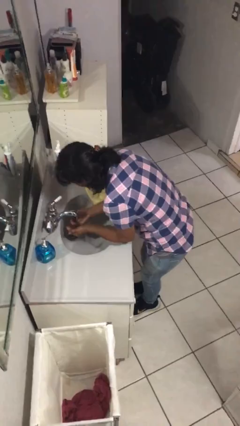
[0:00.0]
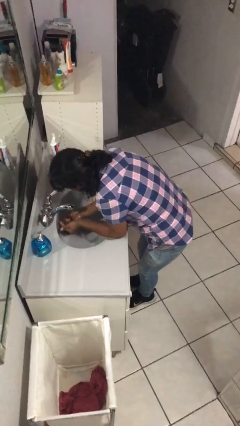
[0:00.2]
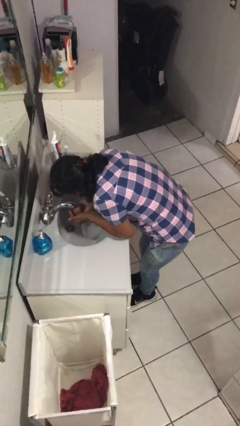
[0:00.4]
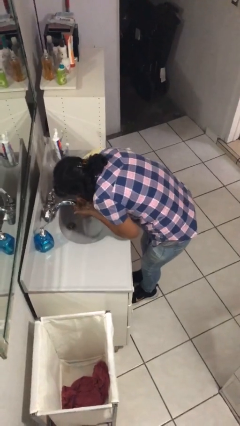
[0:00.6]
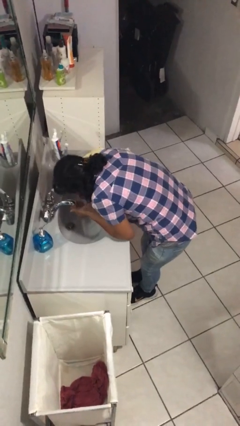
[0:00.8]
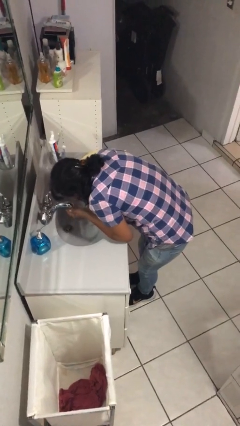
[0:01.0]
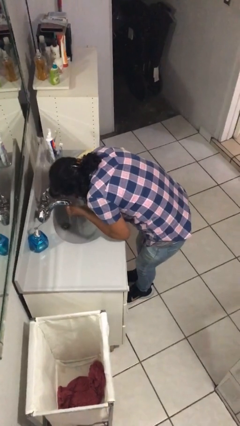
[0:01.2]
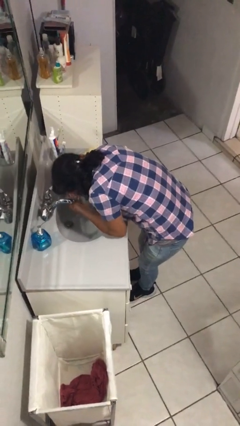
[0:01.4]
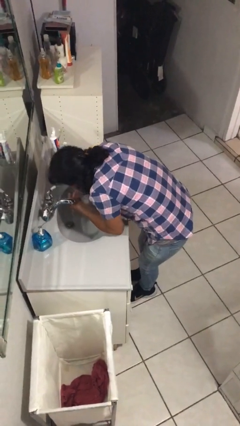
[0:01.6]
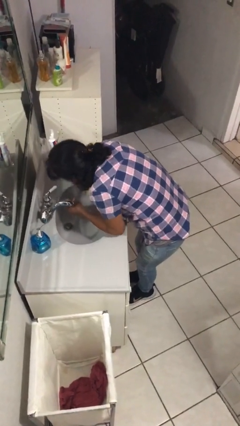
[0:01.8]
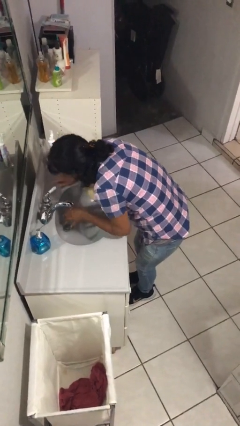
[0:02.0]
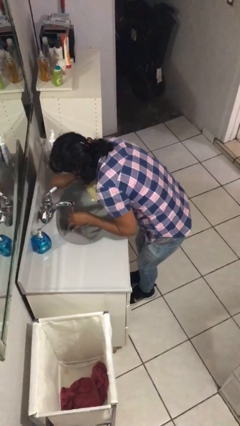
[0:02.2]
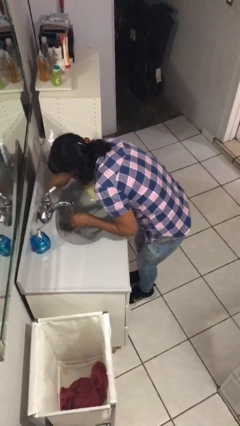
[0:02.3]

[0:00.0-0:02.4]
person washes face

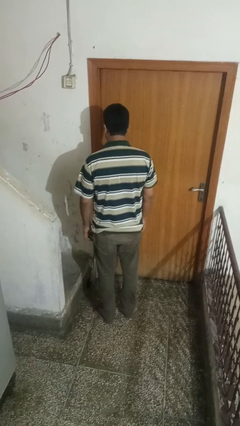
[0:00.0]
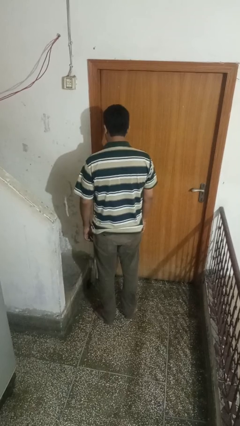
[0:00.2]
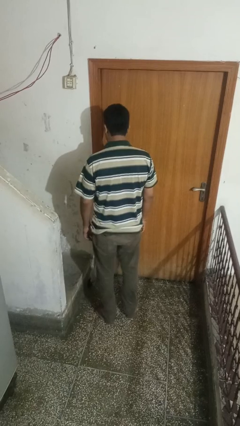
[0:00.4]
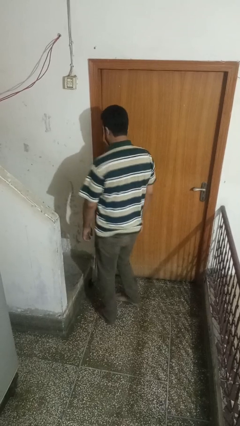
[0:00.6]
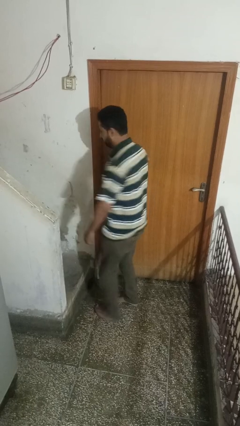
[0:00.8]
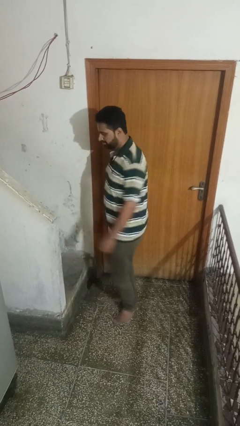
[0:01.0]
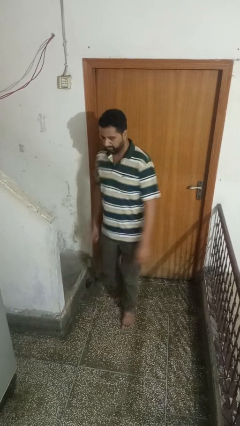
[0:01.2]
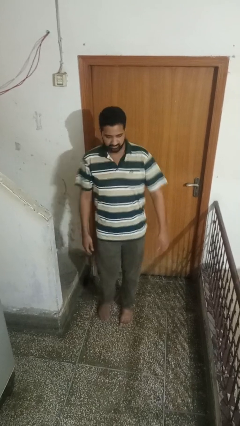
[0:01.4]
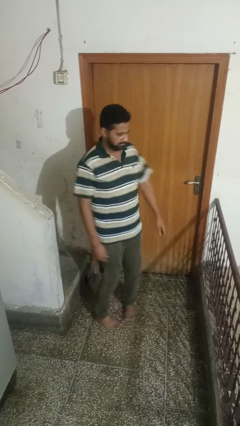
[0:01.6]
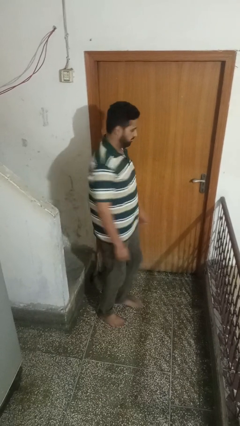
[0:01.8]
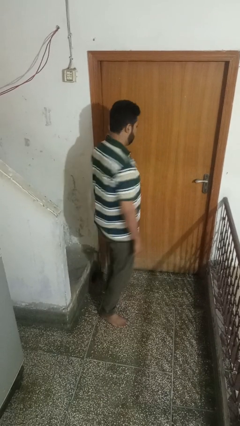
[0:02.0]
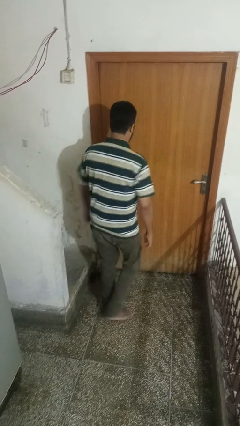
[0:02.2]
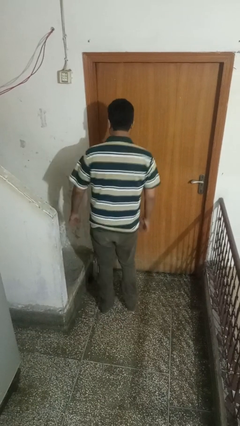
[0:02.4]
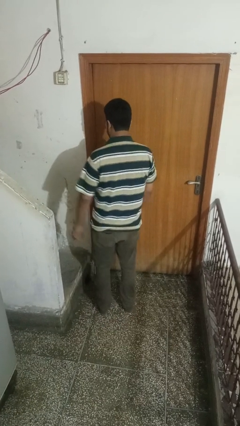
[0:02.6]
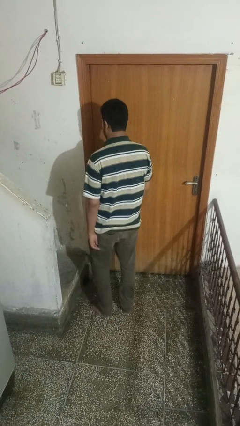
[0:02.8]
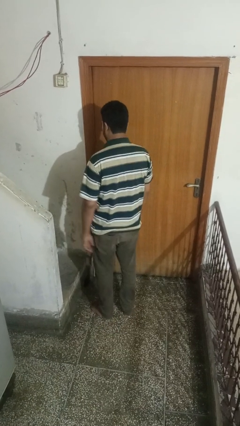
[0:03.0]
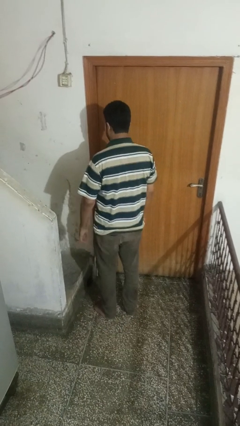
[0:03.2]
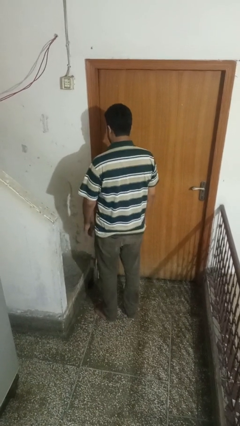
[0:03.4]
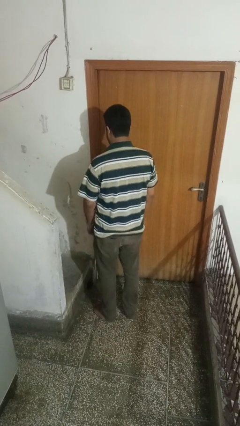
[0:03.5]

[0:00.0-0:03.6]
person twirls

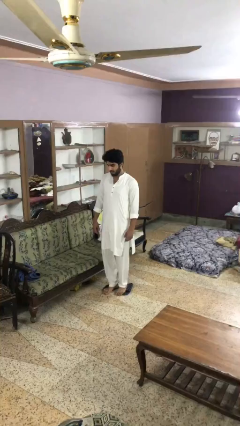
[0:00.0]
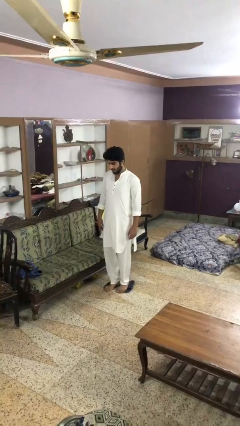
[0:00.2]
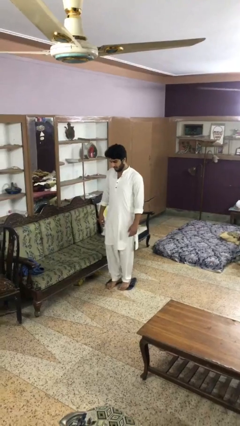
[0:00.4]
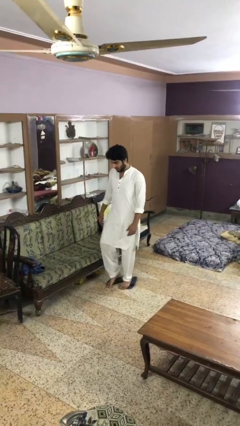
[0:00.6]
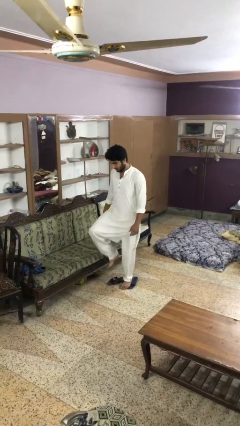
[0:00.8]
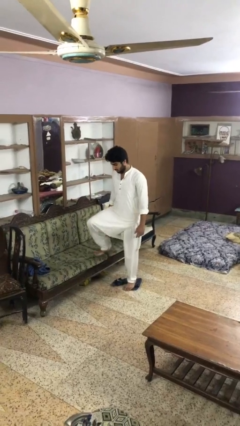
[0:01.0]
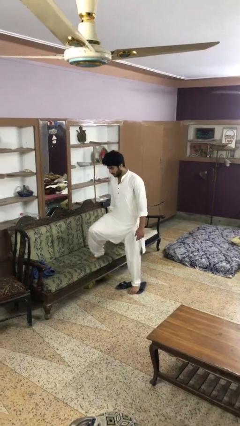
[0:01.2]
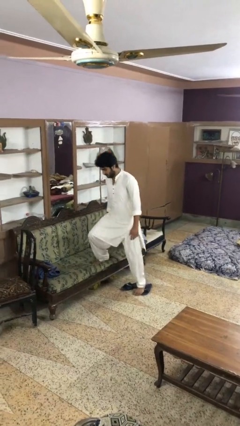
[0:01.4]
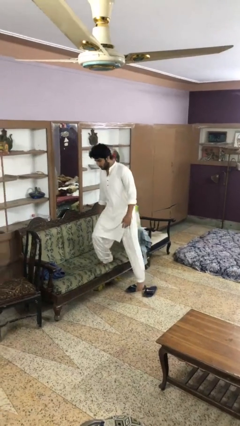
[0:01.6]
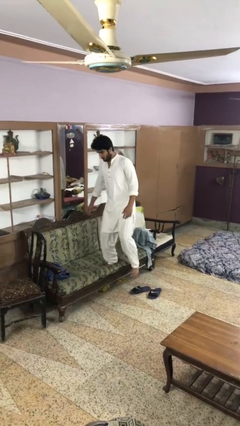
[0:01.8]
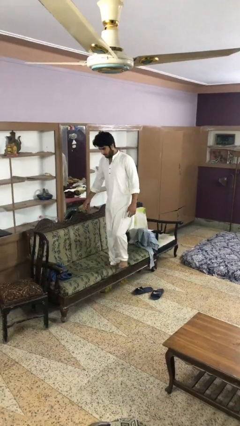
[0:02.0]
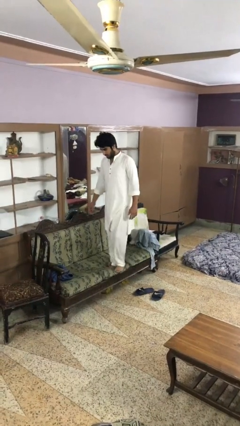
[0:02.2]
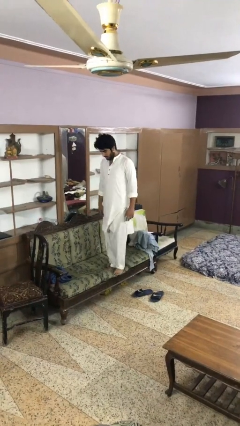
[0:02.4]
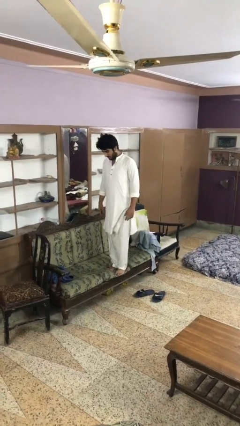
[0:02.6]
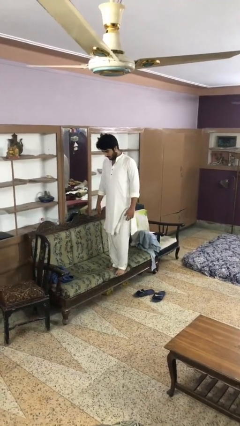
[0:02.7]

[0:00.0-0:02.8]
person climbs on couch

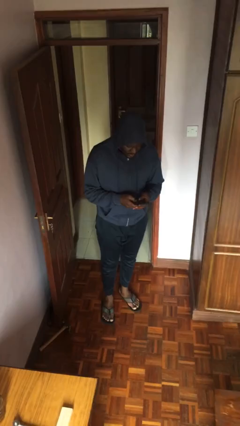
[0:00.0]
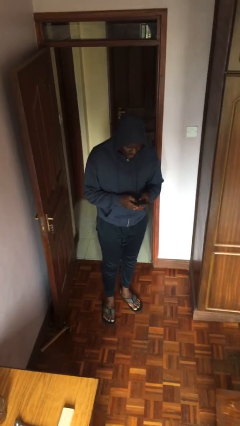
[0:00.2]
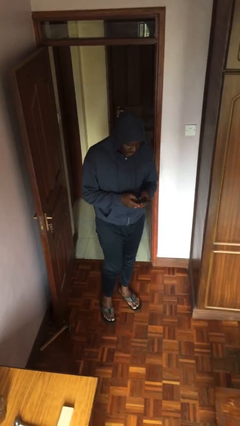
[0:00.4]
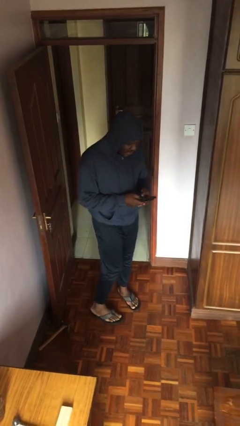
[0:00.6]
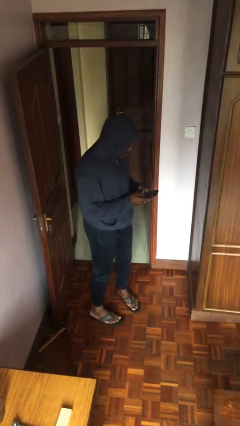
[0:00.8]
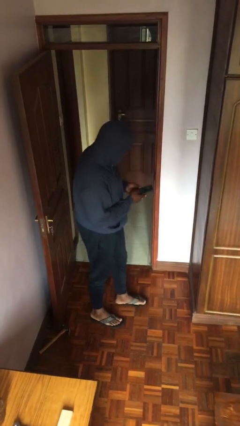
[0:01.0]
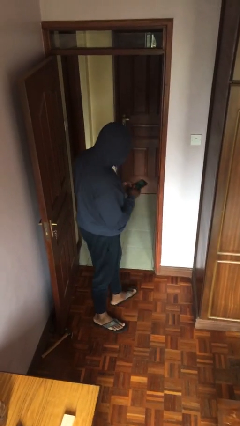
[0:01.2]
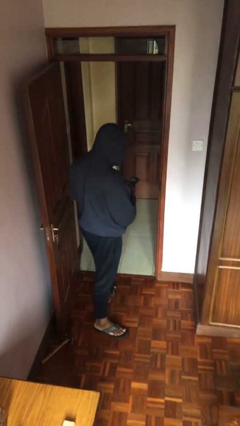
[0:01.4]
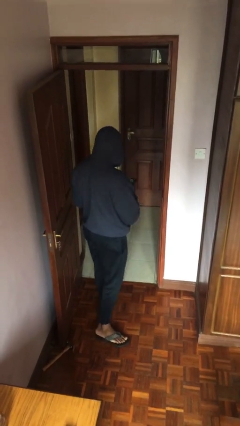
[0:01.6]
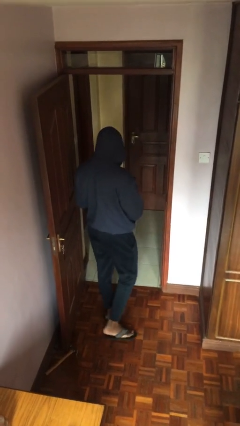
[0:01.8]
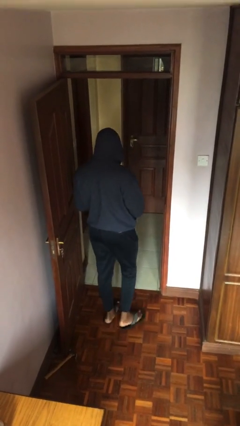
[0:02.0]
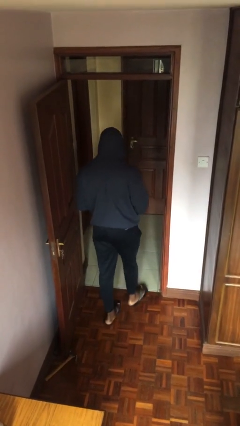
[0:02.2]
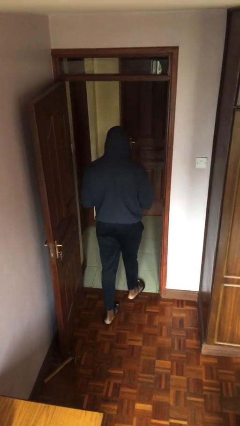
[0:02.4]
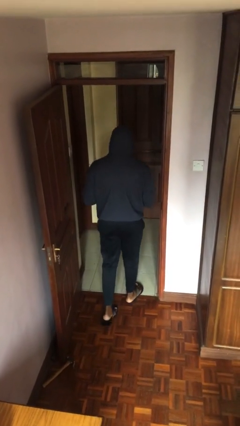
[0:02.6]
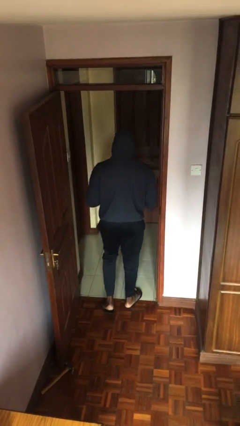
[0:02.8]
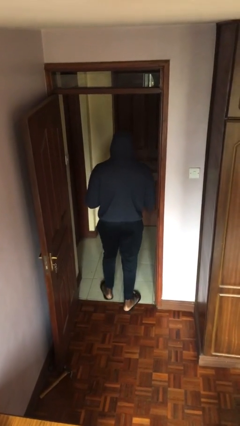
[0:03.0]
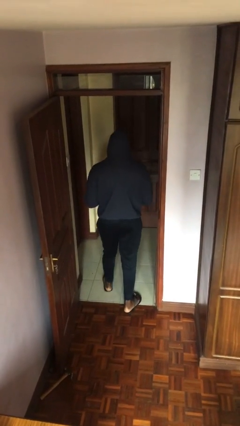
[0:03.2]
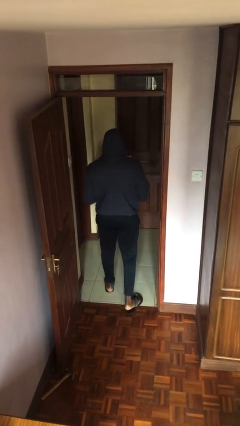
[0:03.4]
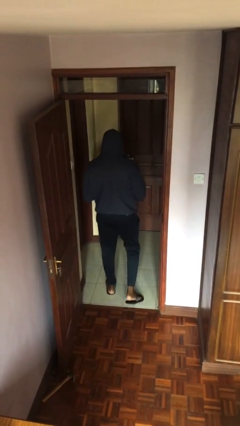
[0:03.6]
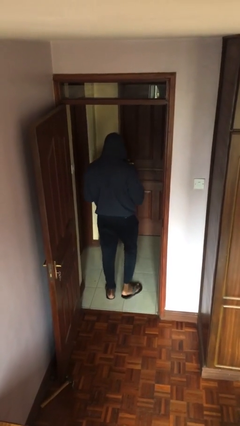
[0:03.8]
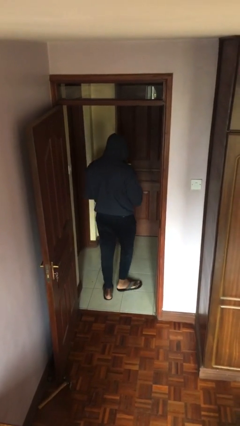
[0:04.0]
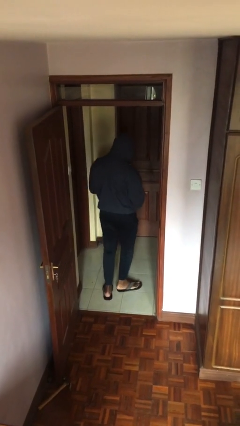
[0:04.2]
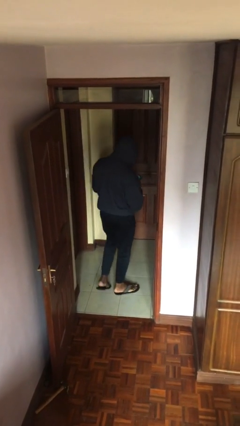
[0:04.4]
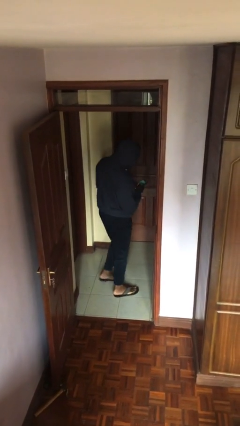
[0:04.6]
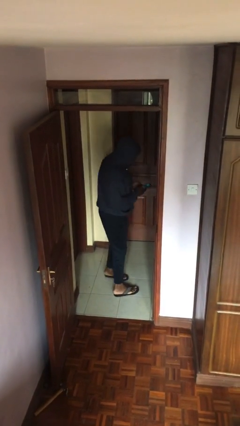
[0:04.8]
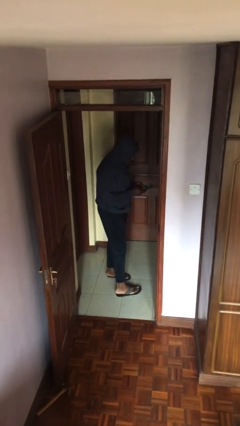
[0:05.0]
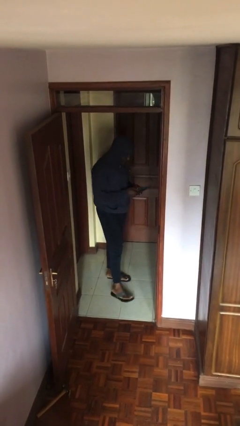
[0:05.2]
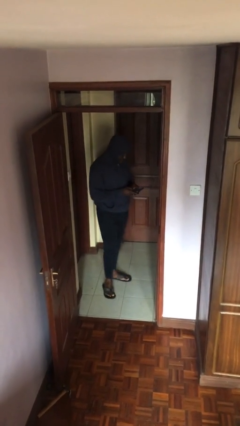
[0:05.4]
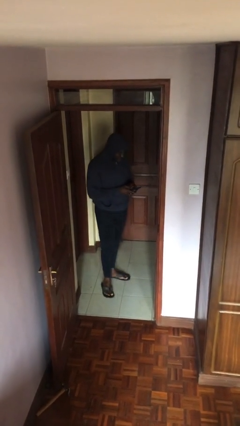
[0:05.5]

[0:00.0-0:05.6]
person exits scene through structure

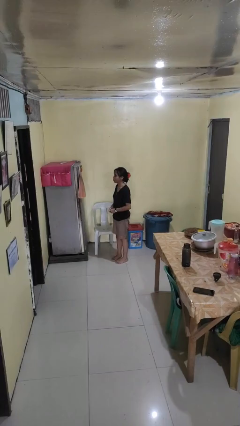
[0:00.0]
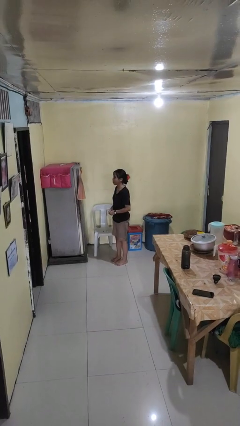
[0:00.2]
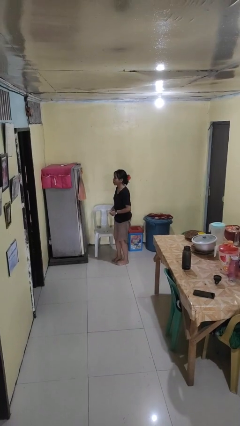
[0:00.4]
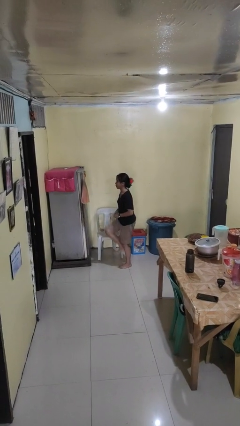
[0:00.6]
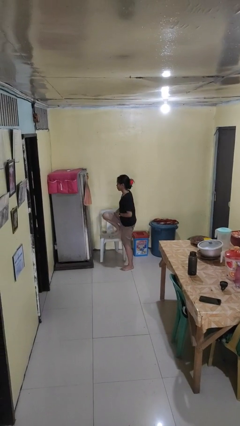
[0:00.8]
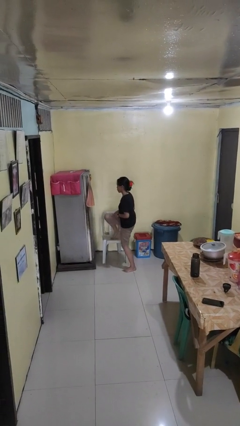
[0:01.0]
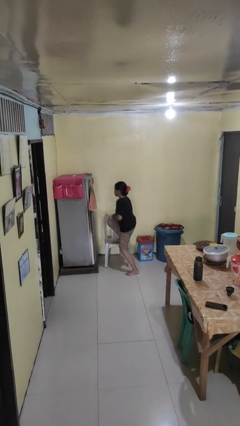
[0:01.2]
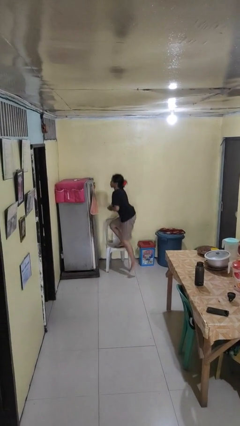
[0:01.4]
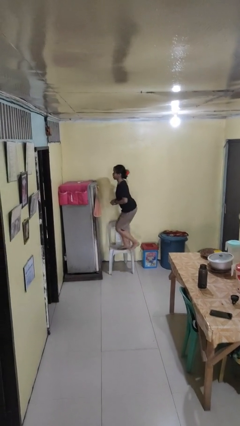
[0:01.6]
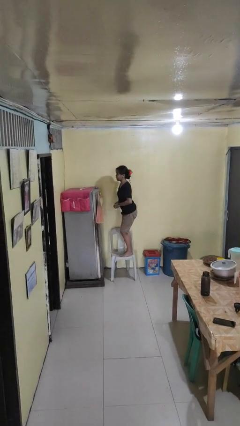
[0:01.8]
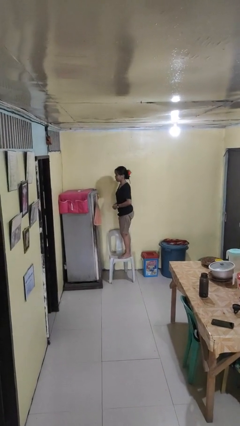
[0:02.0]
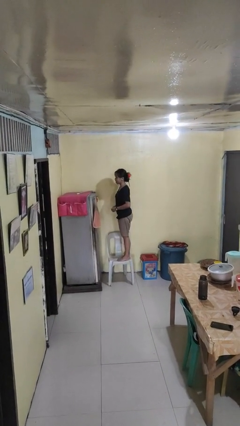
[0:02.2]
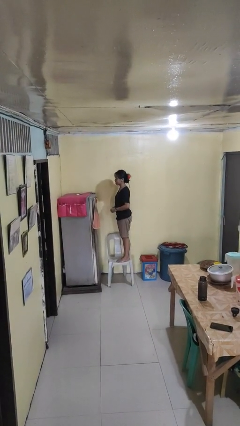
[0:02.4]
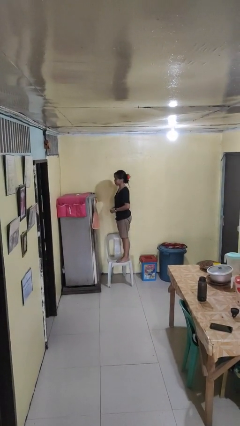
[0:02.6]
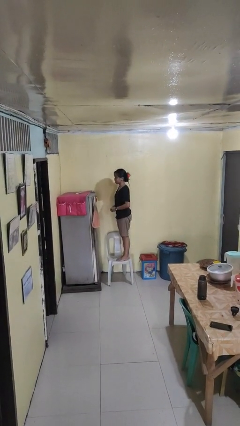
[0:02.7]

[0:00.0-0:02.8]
person climbs on chair
